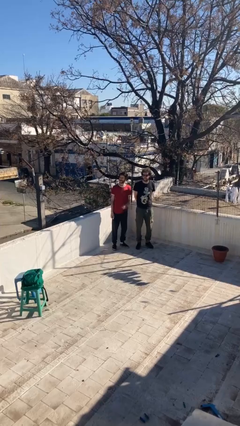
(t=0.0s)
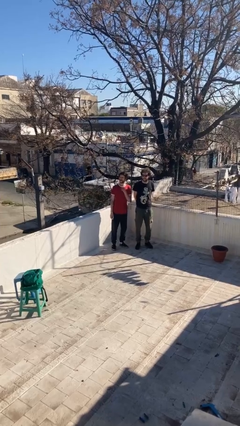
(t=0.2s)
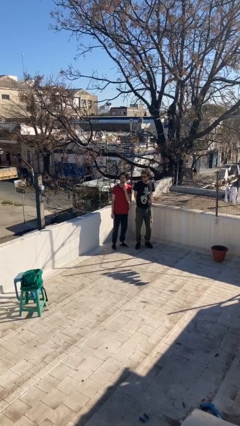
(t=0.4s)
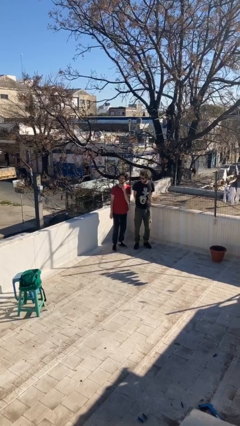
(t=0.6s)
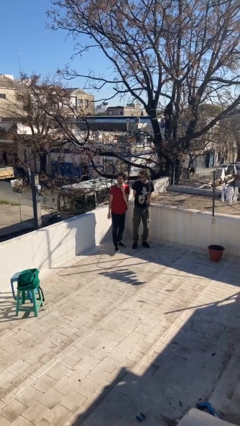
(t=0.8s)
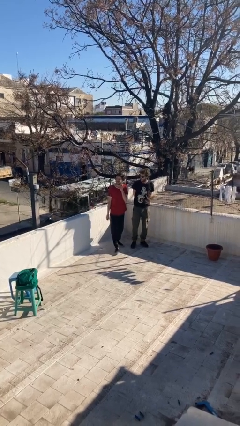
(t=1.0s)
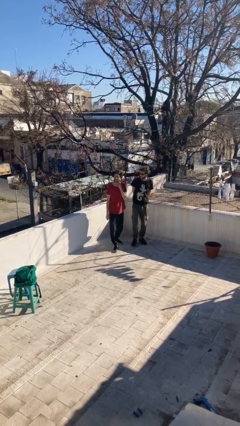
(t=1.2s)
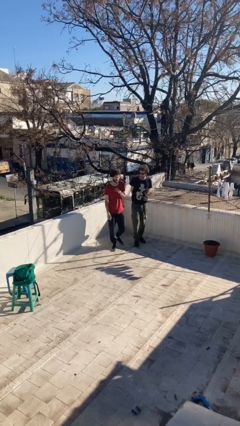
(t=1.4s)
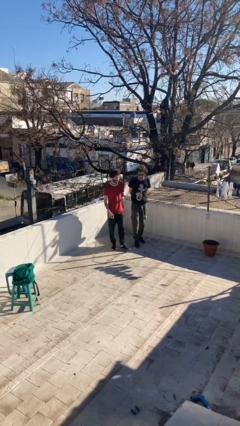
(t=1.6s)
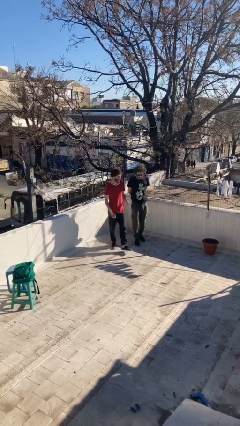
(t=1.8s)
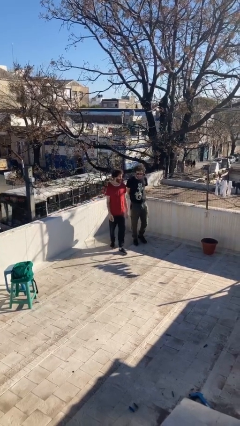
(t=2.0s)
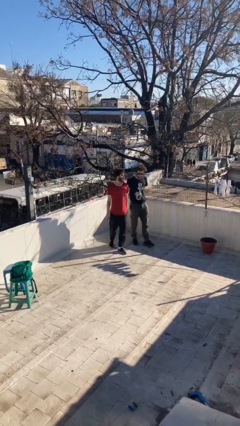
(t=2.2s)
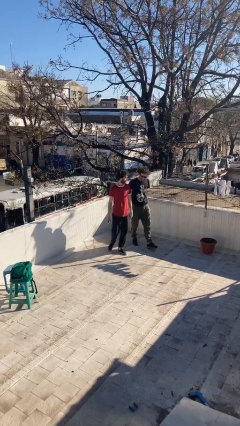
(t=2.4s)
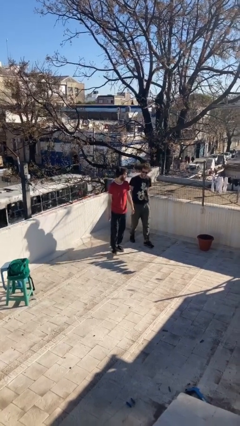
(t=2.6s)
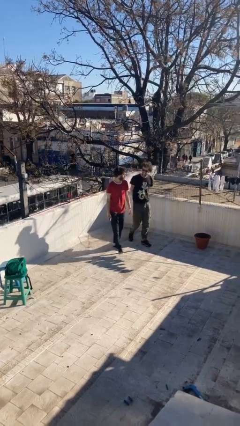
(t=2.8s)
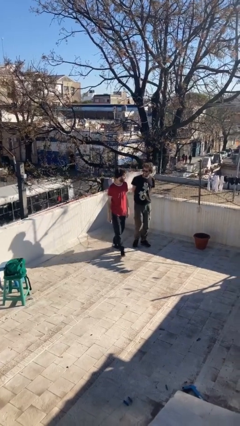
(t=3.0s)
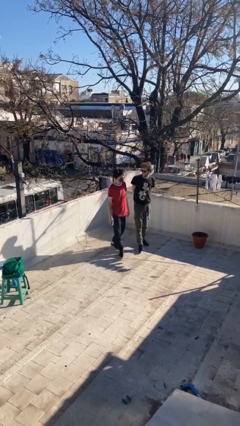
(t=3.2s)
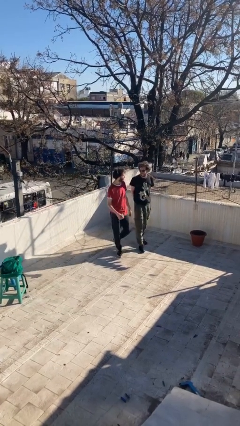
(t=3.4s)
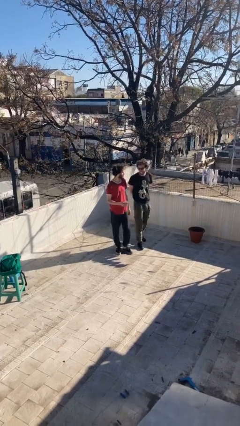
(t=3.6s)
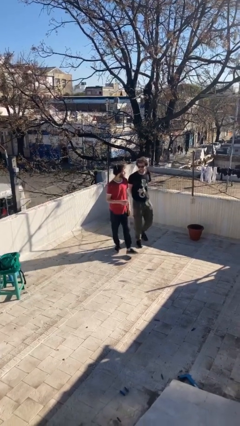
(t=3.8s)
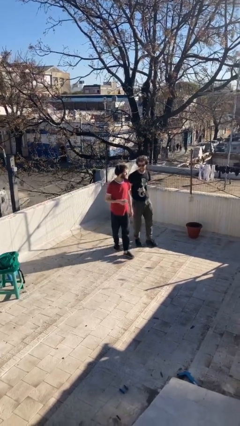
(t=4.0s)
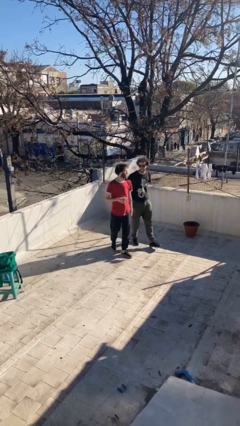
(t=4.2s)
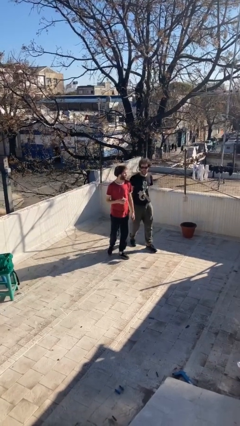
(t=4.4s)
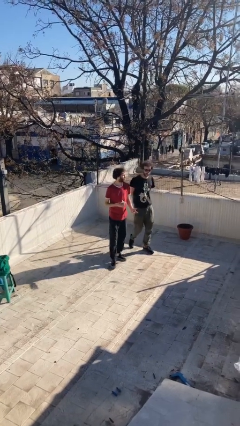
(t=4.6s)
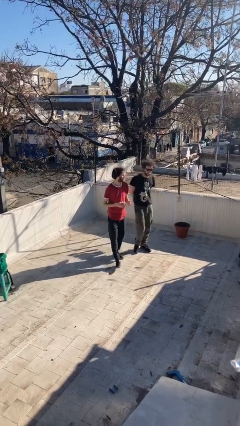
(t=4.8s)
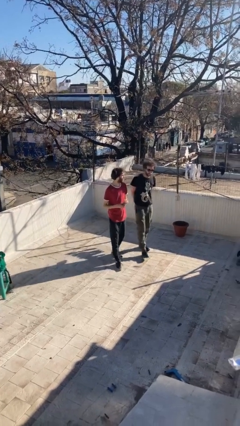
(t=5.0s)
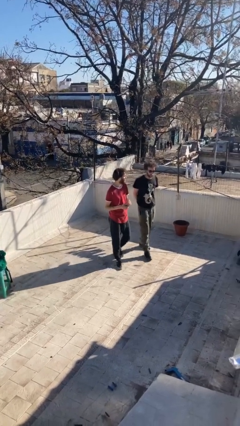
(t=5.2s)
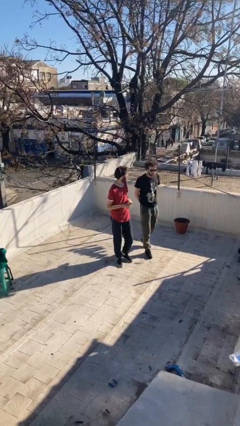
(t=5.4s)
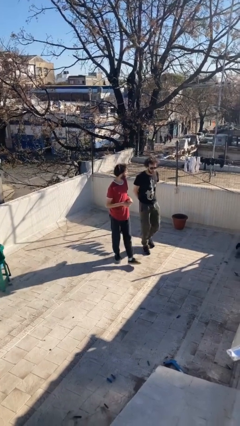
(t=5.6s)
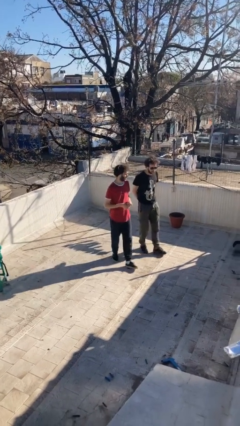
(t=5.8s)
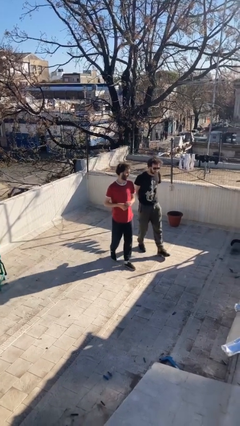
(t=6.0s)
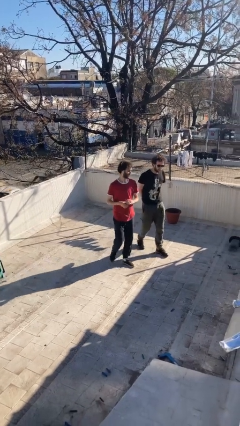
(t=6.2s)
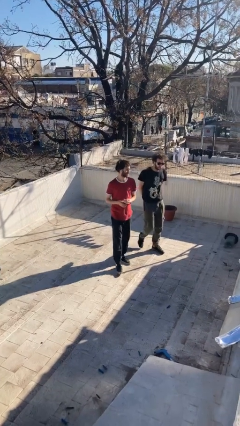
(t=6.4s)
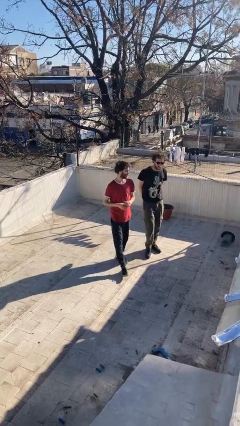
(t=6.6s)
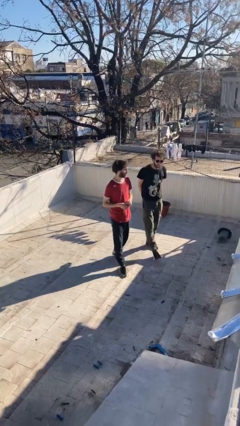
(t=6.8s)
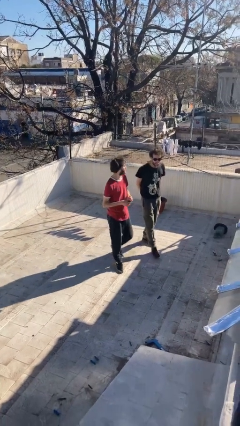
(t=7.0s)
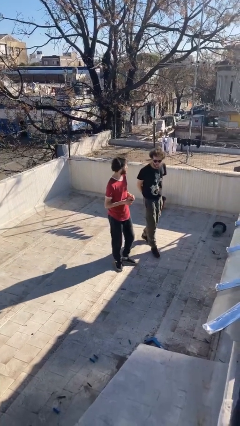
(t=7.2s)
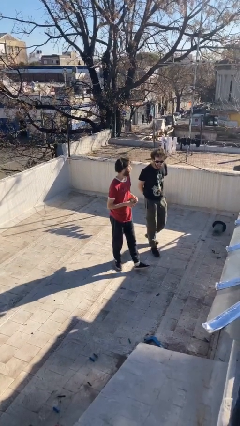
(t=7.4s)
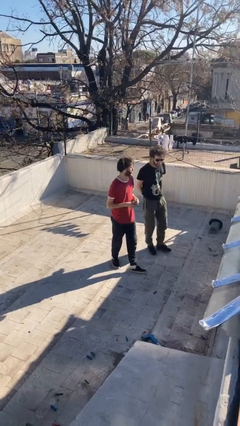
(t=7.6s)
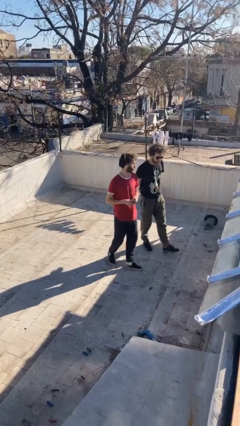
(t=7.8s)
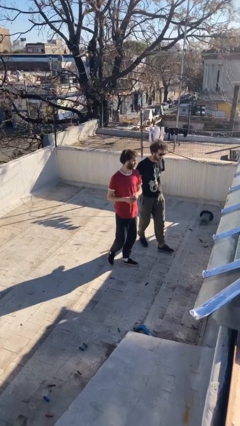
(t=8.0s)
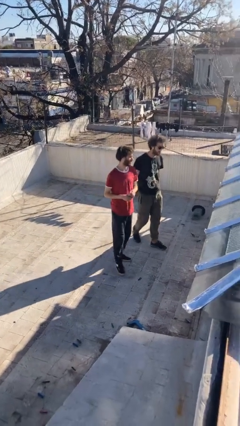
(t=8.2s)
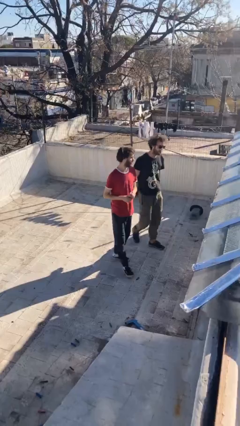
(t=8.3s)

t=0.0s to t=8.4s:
person talks to person

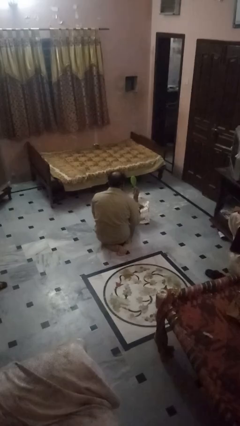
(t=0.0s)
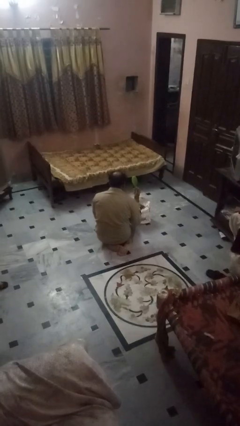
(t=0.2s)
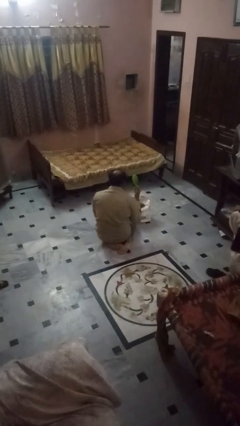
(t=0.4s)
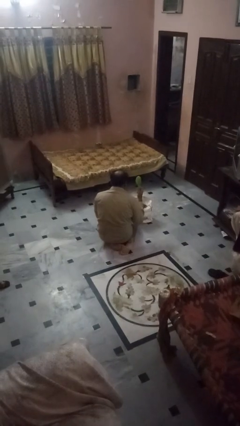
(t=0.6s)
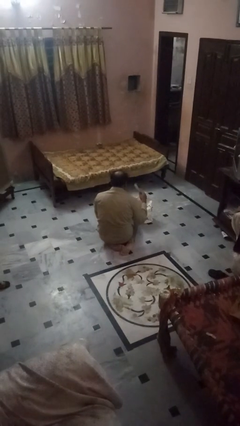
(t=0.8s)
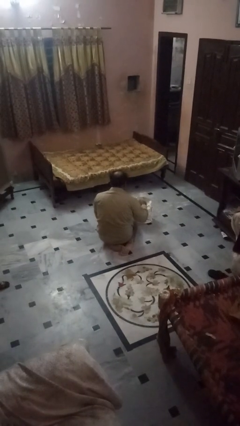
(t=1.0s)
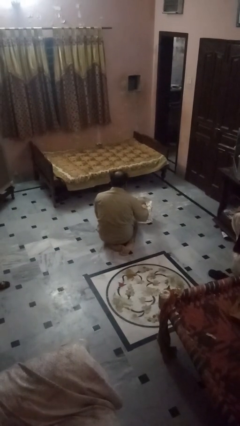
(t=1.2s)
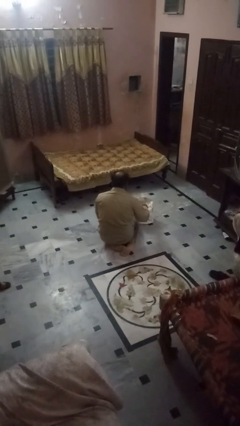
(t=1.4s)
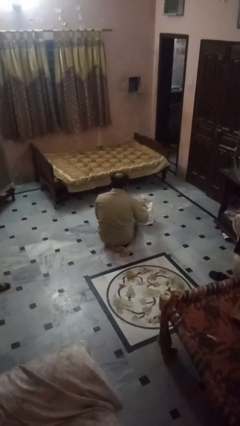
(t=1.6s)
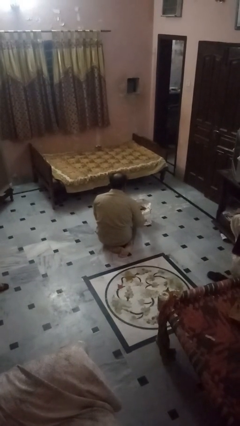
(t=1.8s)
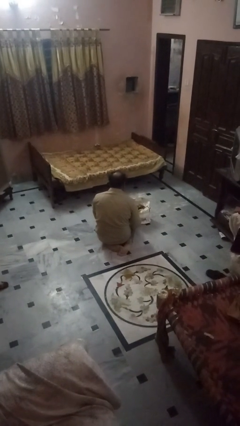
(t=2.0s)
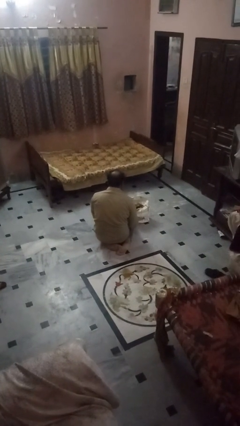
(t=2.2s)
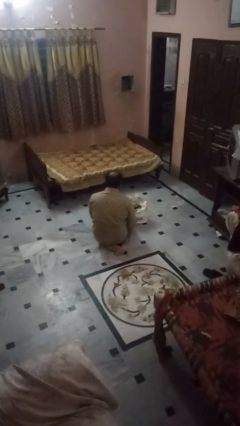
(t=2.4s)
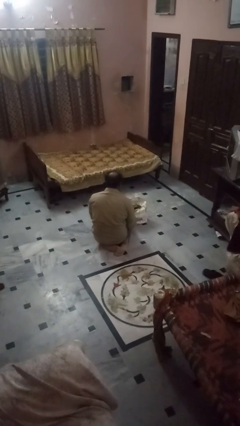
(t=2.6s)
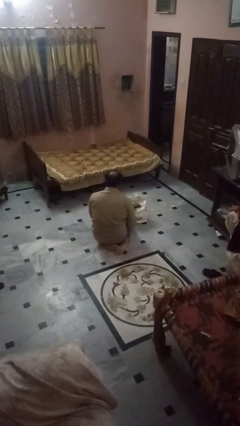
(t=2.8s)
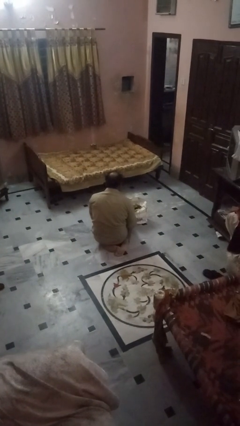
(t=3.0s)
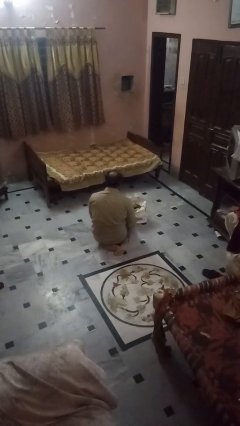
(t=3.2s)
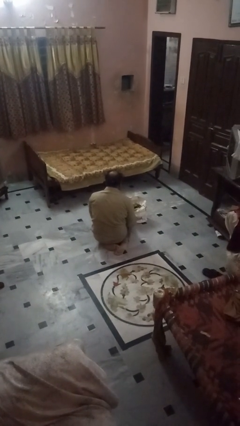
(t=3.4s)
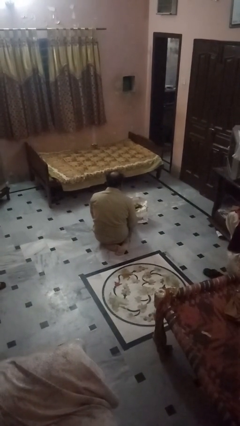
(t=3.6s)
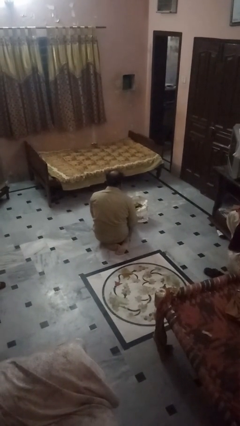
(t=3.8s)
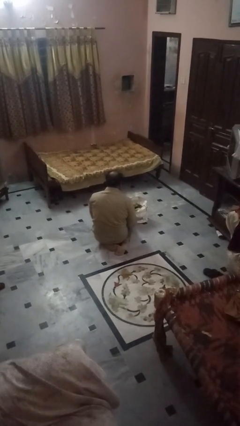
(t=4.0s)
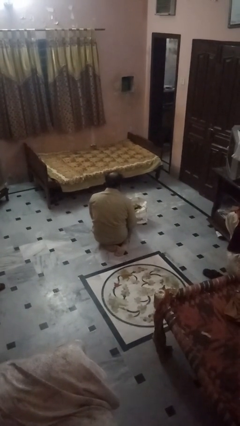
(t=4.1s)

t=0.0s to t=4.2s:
person puts object into bag

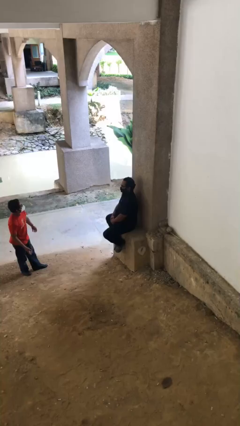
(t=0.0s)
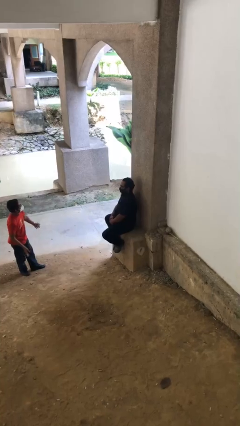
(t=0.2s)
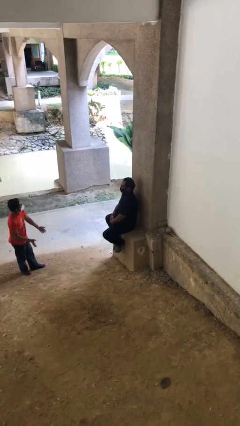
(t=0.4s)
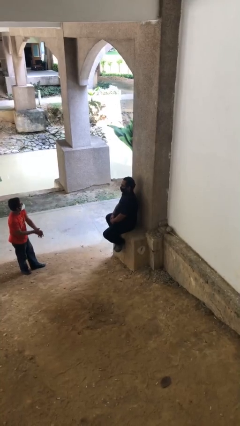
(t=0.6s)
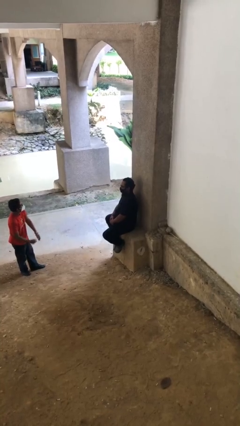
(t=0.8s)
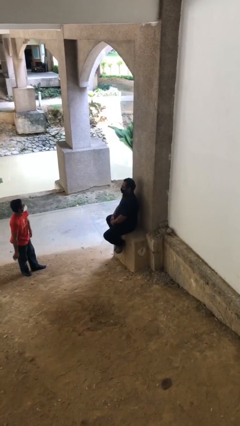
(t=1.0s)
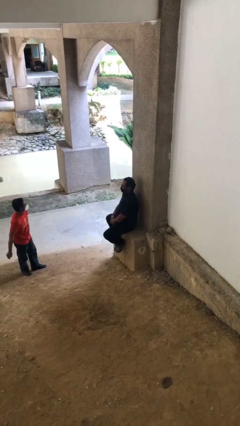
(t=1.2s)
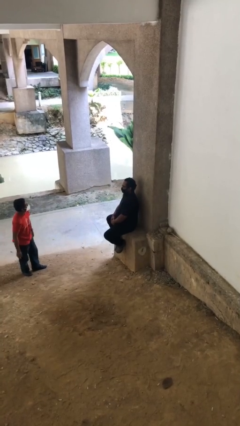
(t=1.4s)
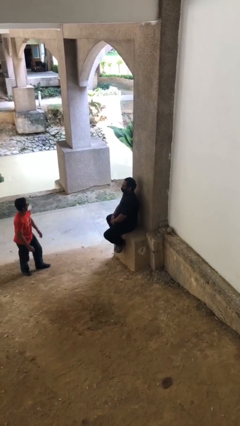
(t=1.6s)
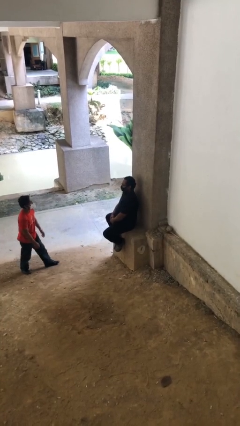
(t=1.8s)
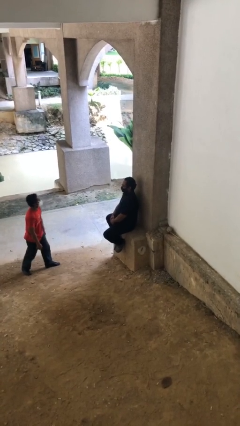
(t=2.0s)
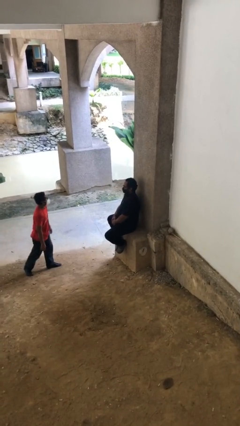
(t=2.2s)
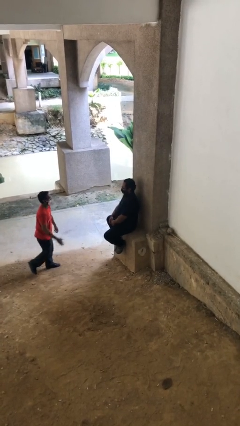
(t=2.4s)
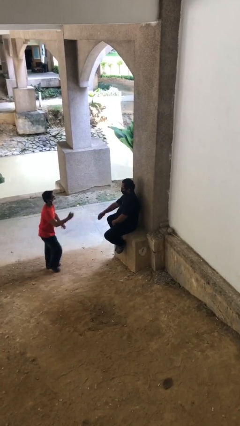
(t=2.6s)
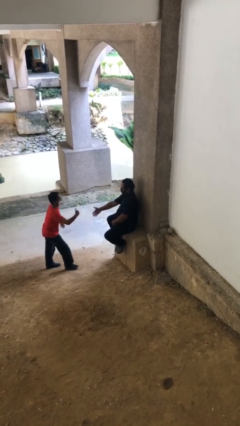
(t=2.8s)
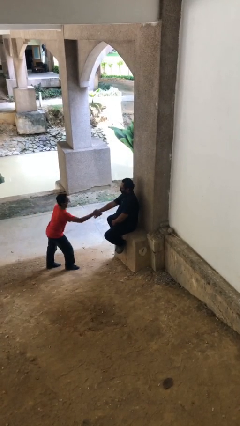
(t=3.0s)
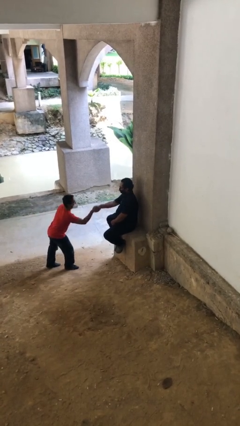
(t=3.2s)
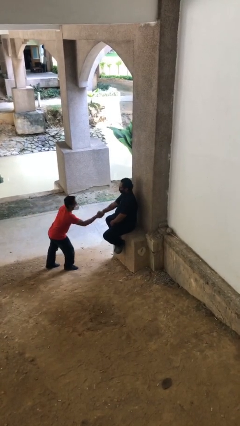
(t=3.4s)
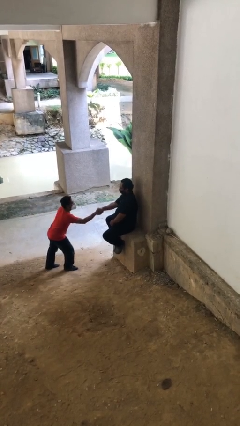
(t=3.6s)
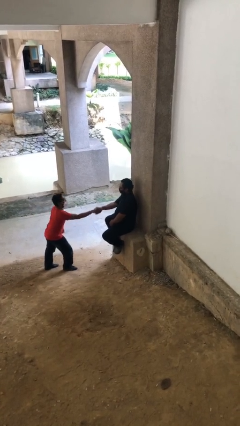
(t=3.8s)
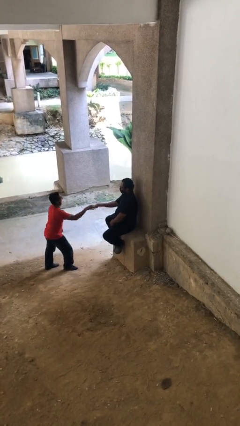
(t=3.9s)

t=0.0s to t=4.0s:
person shakes hand

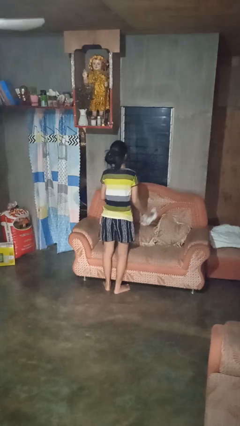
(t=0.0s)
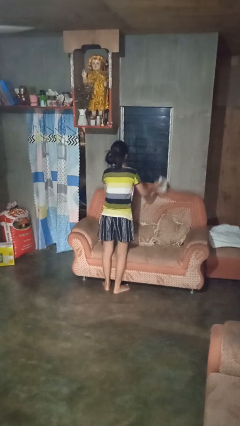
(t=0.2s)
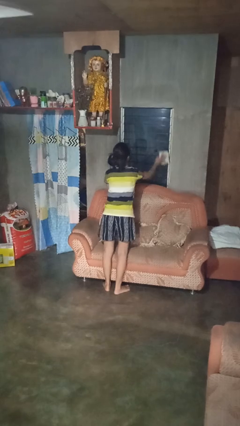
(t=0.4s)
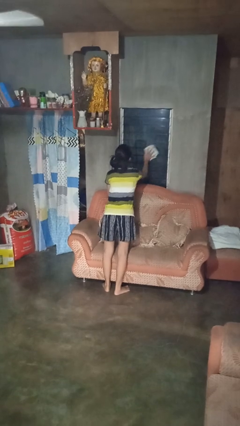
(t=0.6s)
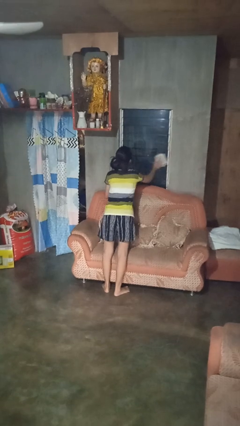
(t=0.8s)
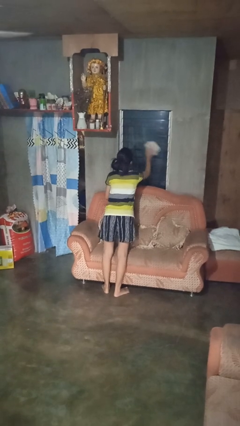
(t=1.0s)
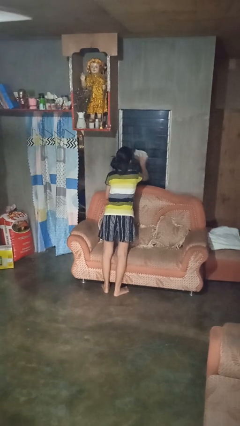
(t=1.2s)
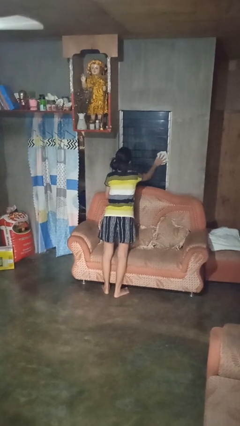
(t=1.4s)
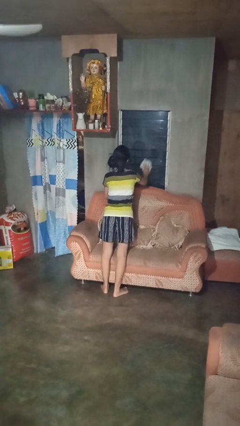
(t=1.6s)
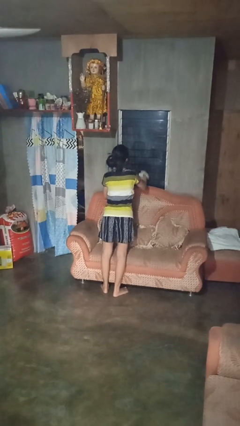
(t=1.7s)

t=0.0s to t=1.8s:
person washes window
